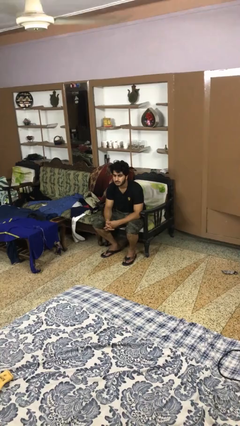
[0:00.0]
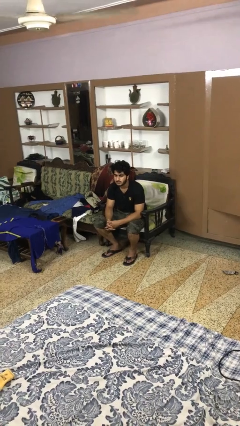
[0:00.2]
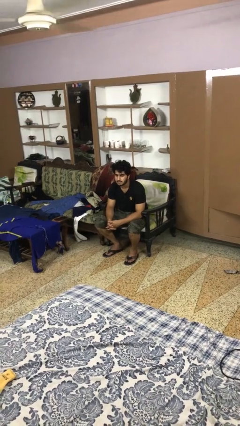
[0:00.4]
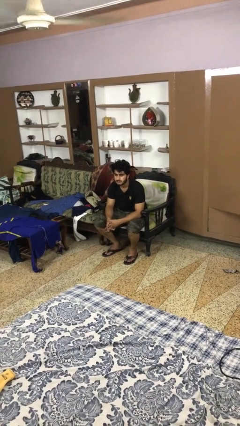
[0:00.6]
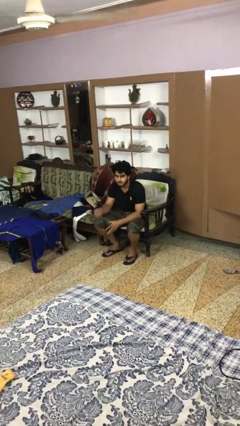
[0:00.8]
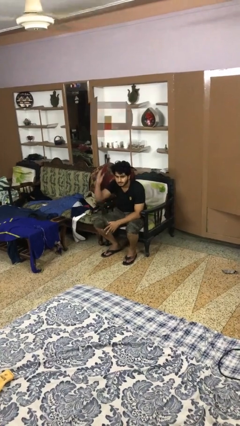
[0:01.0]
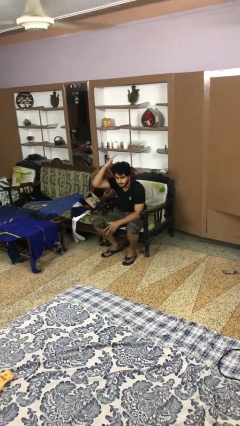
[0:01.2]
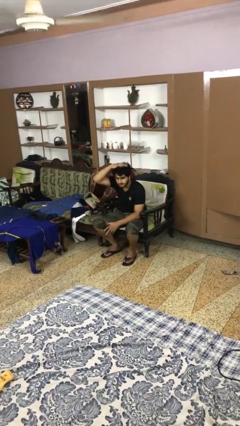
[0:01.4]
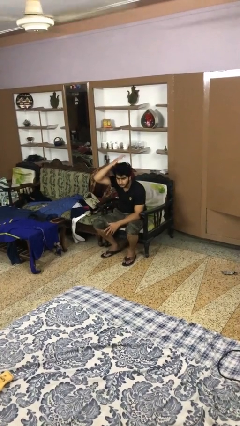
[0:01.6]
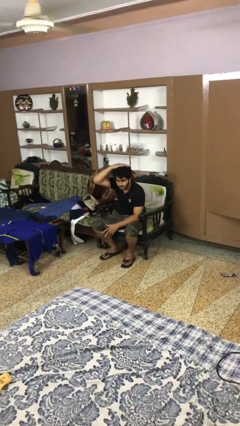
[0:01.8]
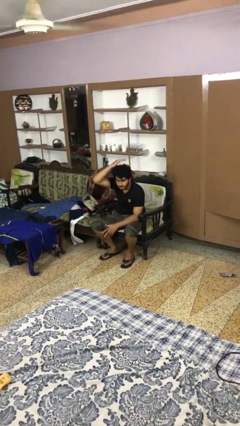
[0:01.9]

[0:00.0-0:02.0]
person pats head

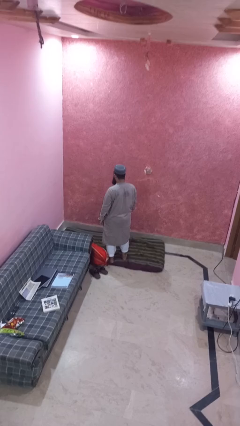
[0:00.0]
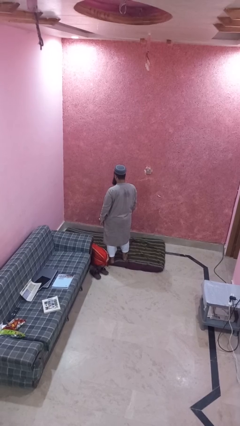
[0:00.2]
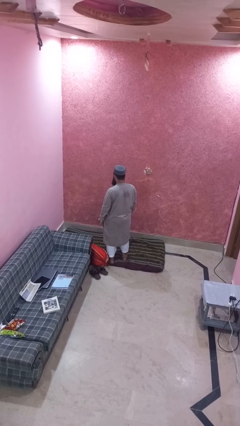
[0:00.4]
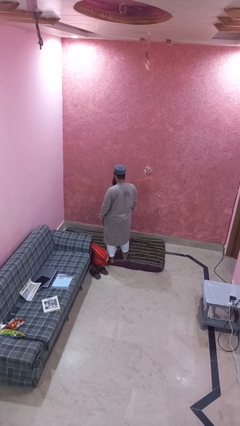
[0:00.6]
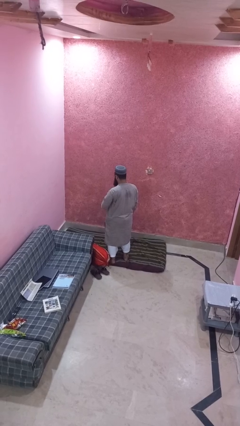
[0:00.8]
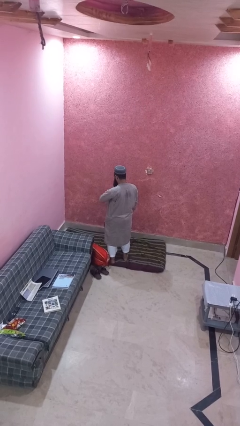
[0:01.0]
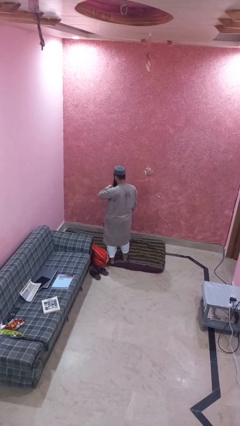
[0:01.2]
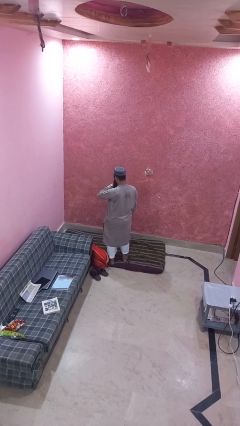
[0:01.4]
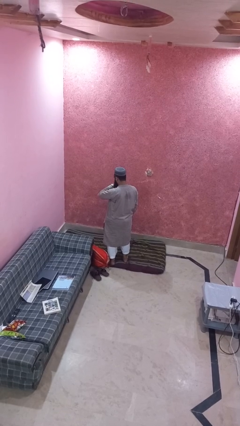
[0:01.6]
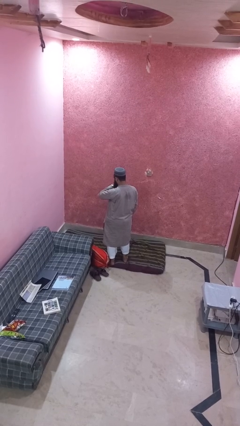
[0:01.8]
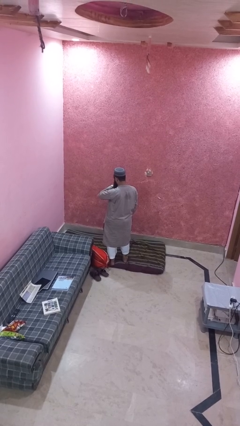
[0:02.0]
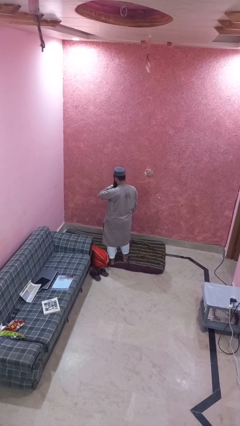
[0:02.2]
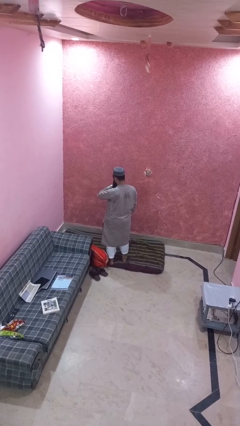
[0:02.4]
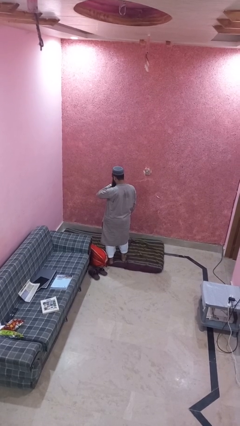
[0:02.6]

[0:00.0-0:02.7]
person looks at wristwatch

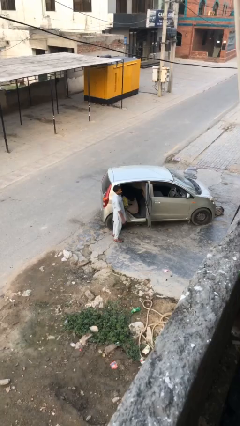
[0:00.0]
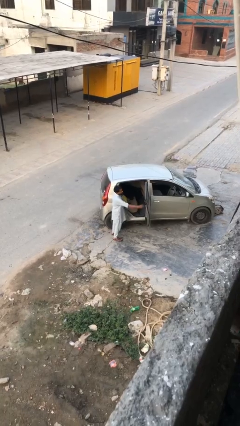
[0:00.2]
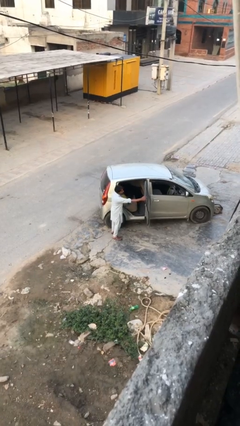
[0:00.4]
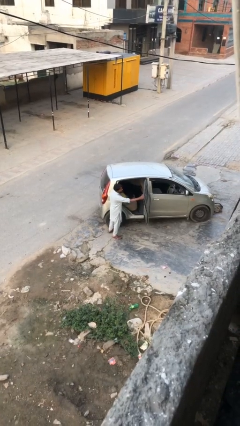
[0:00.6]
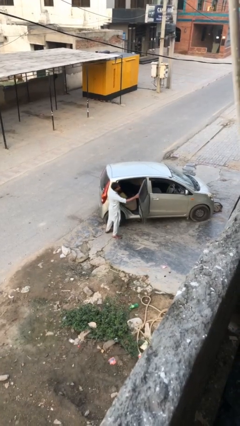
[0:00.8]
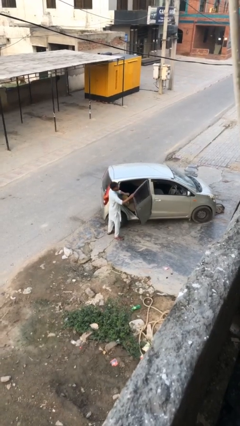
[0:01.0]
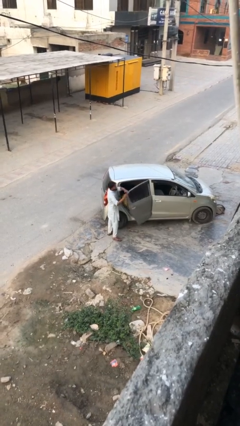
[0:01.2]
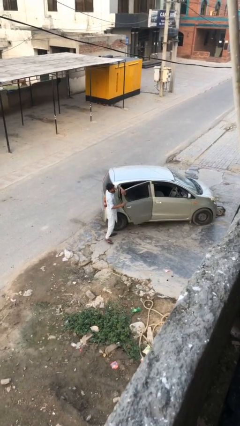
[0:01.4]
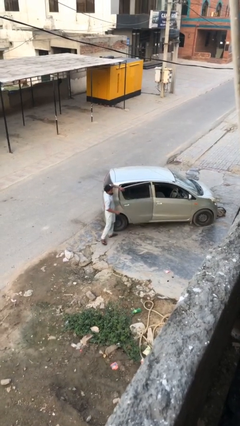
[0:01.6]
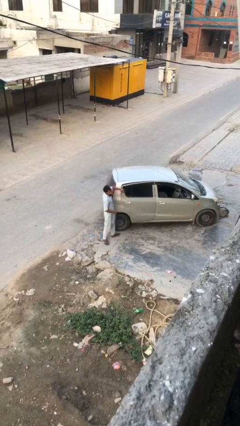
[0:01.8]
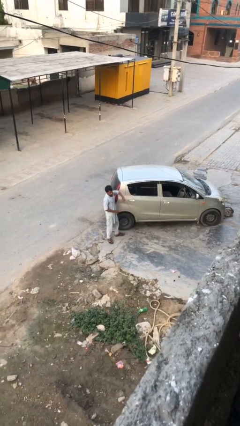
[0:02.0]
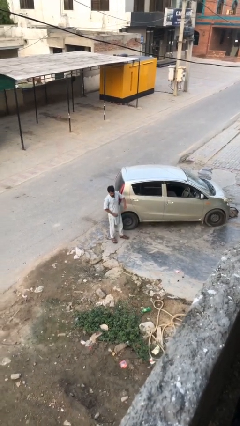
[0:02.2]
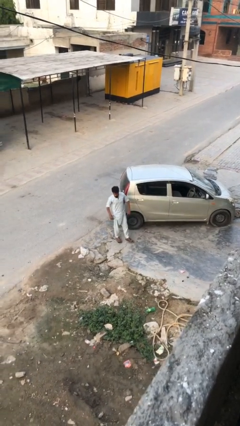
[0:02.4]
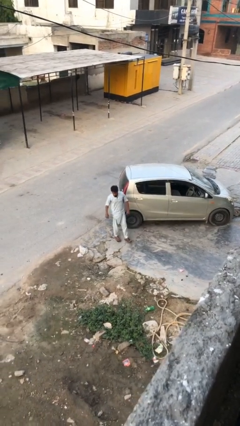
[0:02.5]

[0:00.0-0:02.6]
person closes car door

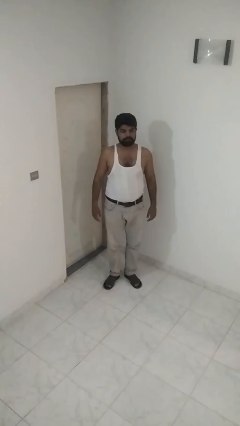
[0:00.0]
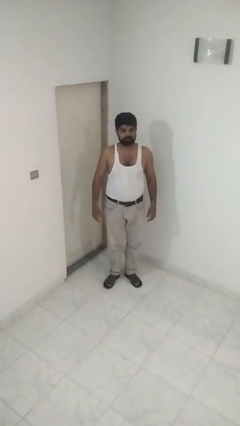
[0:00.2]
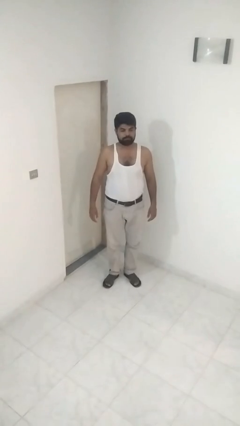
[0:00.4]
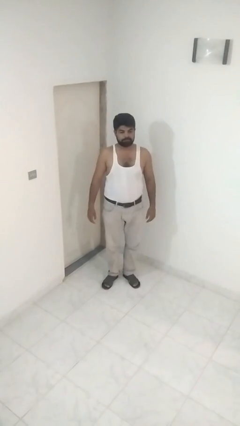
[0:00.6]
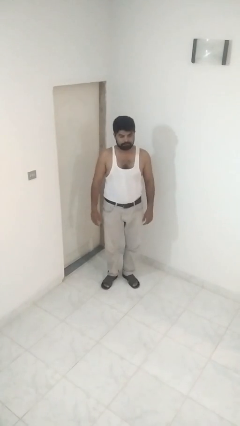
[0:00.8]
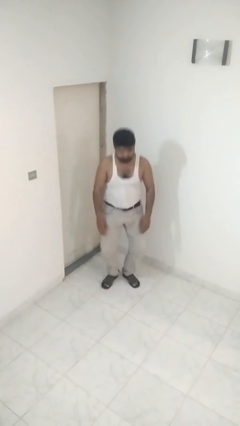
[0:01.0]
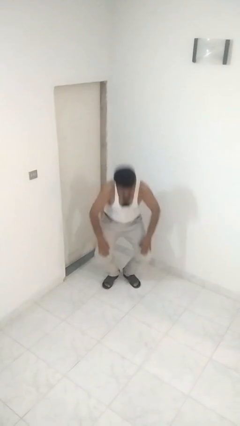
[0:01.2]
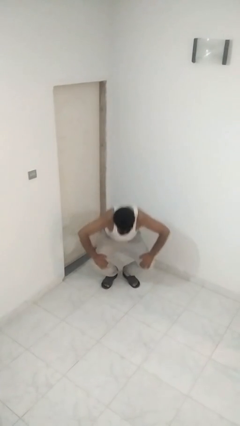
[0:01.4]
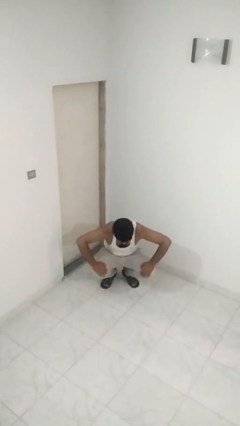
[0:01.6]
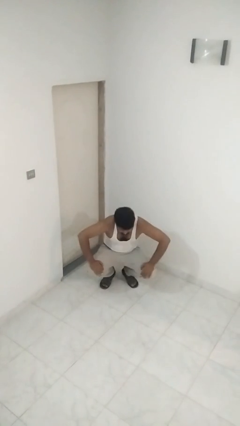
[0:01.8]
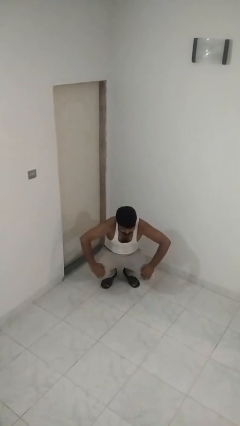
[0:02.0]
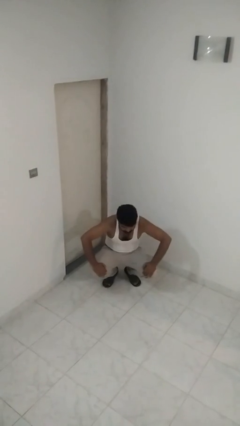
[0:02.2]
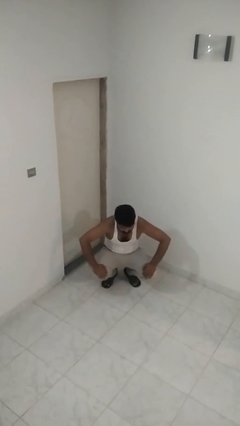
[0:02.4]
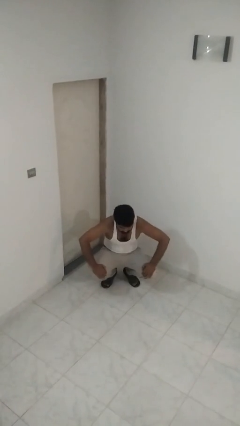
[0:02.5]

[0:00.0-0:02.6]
person squats

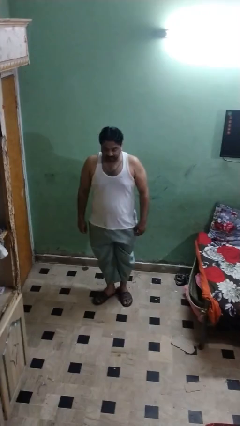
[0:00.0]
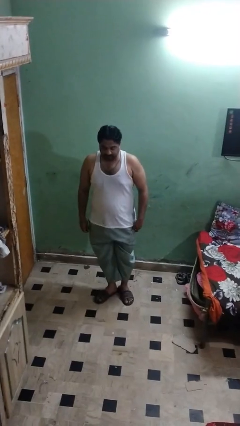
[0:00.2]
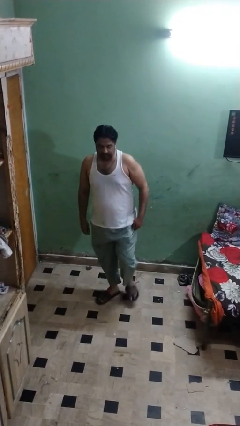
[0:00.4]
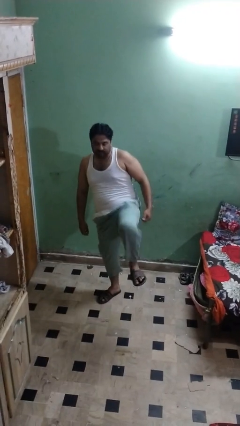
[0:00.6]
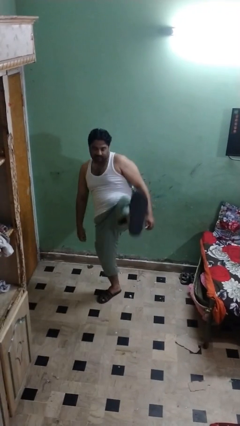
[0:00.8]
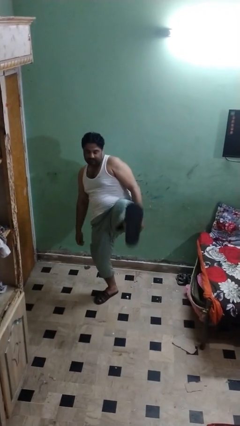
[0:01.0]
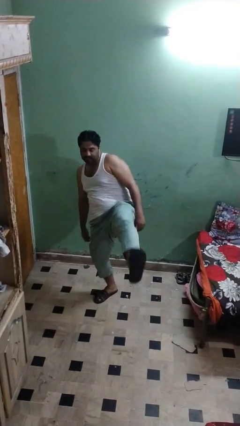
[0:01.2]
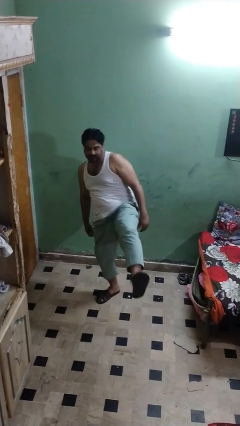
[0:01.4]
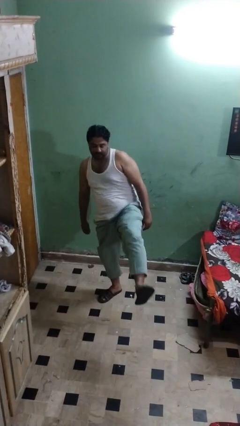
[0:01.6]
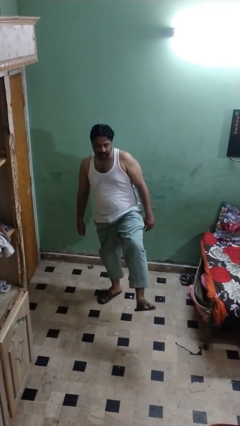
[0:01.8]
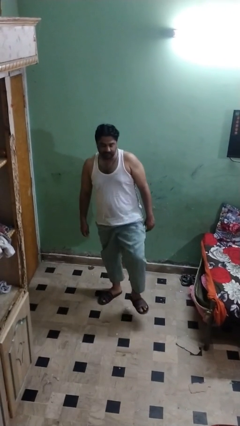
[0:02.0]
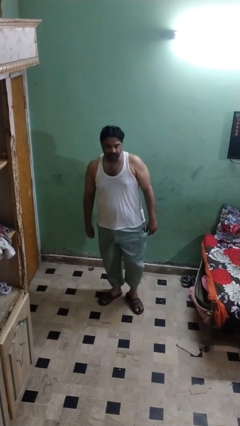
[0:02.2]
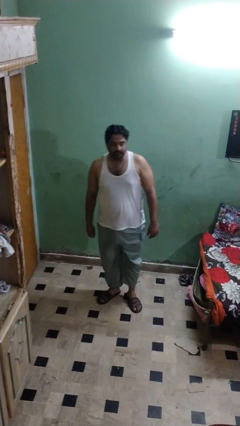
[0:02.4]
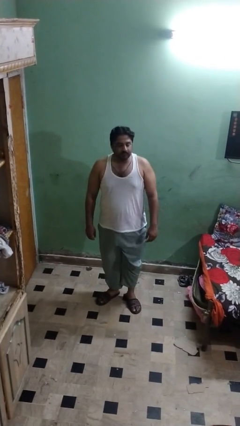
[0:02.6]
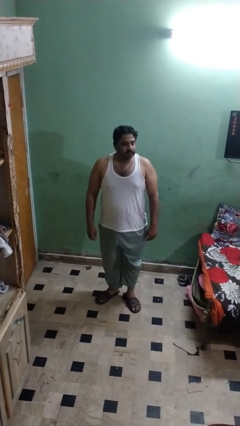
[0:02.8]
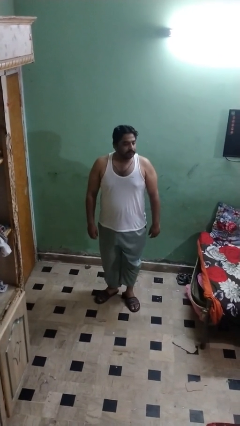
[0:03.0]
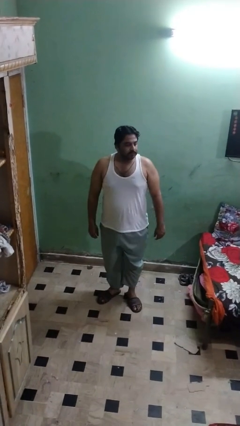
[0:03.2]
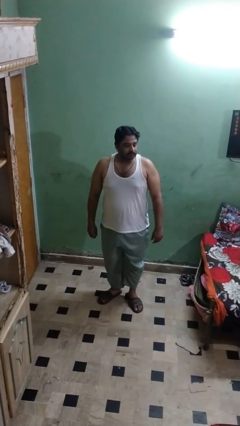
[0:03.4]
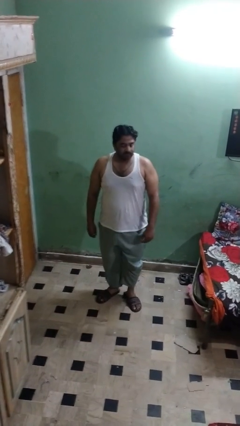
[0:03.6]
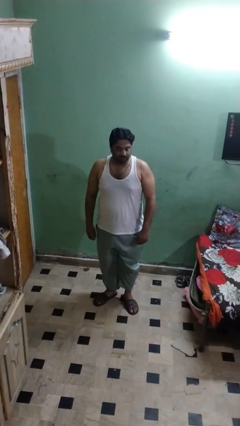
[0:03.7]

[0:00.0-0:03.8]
person karate kicks

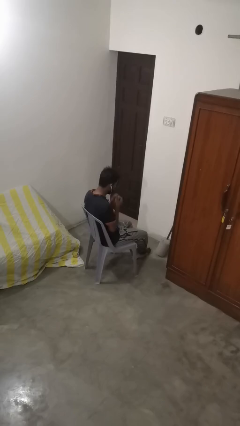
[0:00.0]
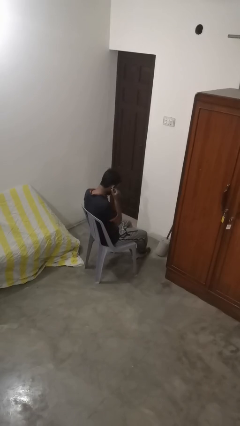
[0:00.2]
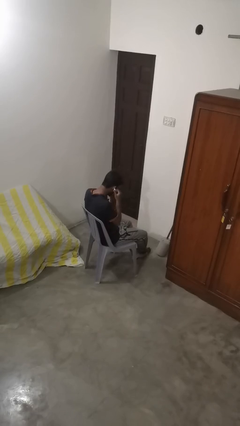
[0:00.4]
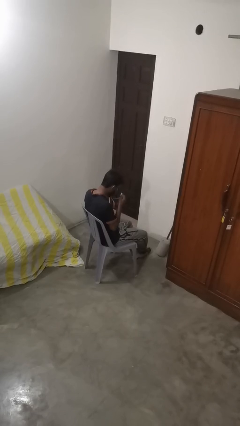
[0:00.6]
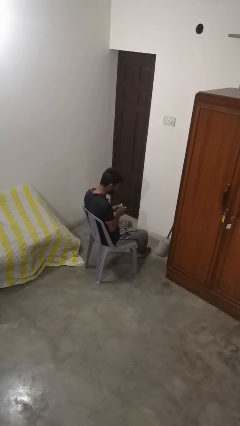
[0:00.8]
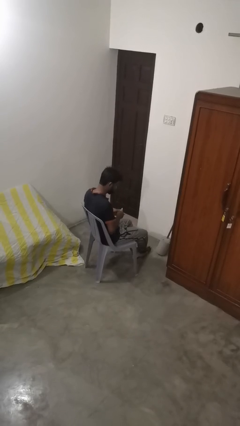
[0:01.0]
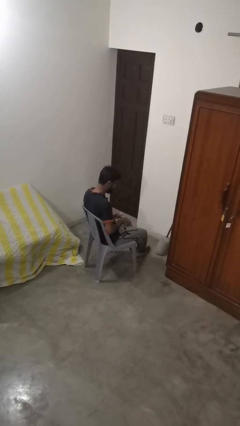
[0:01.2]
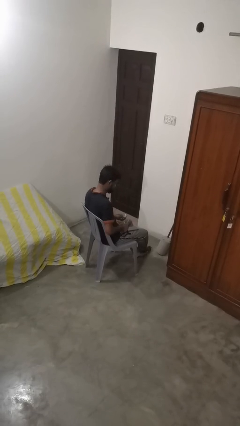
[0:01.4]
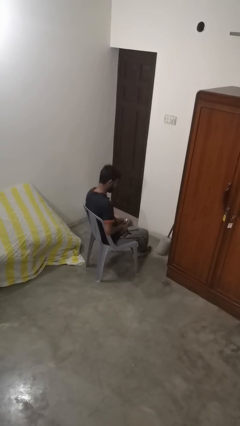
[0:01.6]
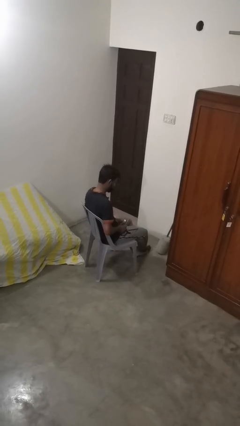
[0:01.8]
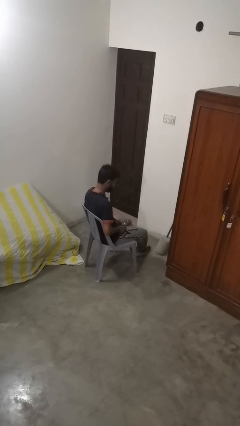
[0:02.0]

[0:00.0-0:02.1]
person takes off headphones

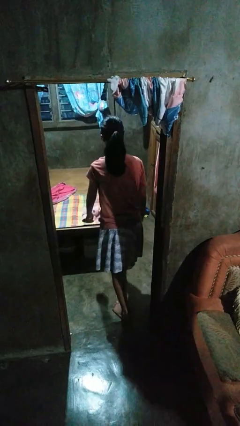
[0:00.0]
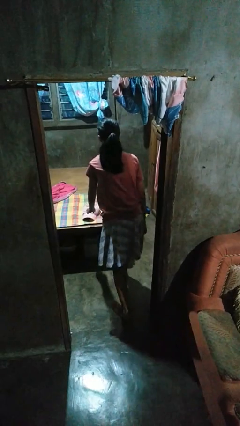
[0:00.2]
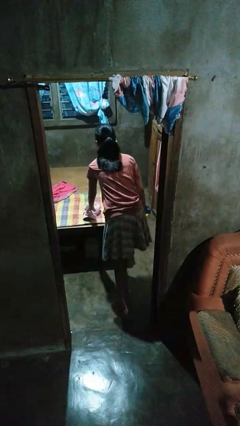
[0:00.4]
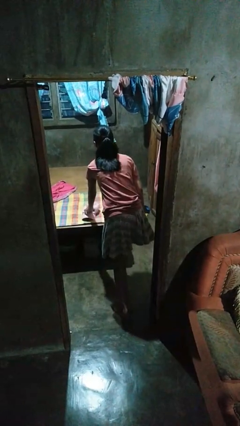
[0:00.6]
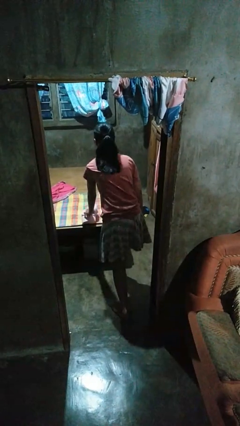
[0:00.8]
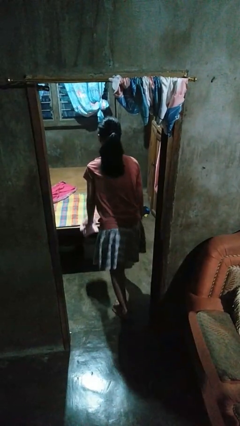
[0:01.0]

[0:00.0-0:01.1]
person picks up object from bed

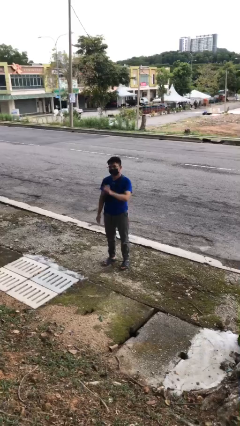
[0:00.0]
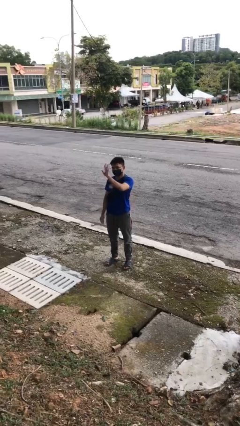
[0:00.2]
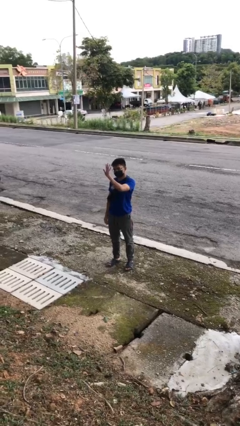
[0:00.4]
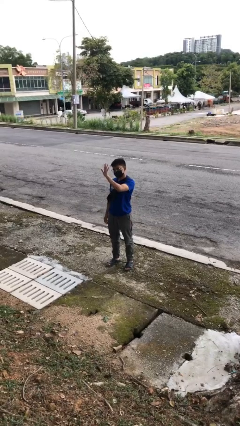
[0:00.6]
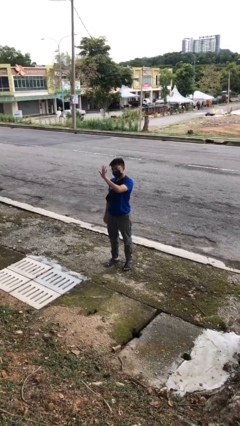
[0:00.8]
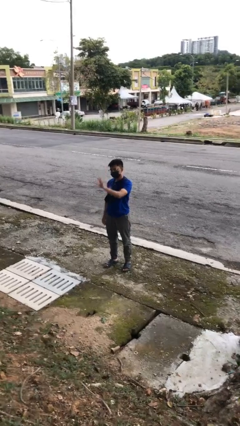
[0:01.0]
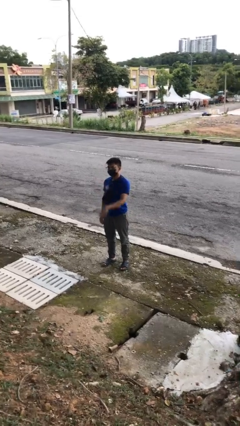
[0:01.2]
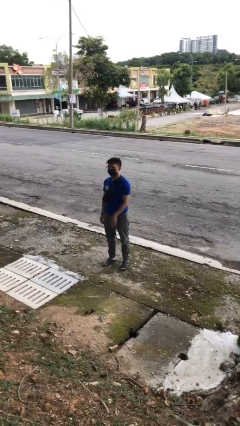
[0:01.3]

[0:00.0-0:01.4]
person gestures stop
